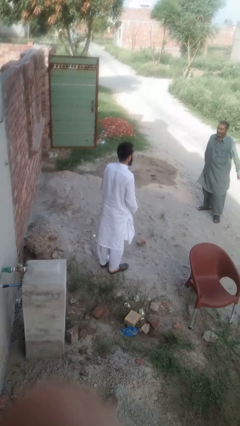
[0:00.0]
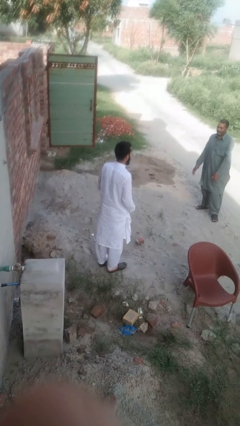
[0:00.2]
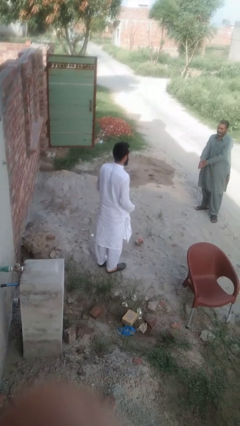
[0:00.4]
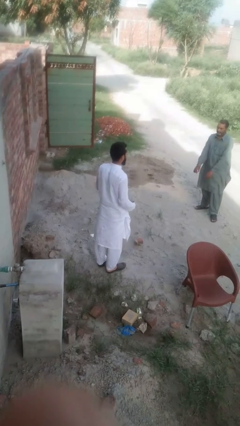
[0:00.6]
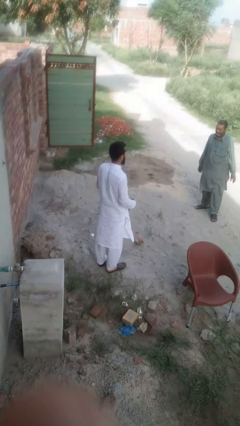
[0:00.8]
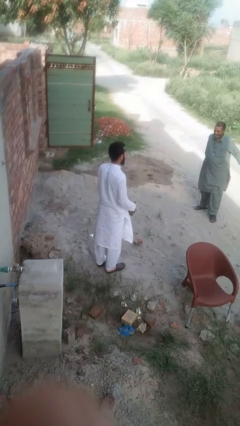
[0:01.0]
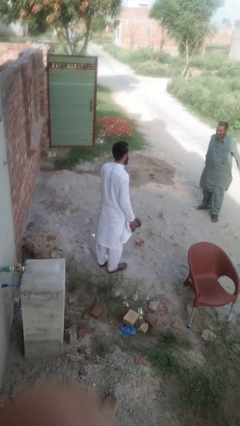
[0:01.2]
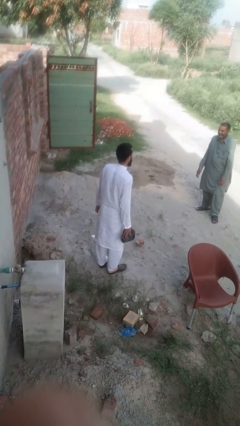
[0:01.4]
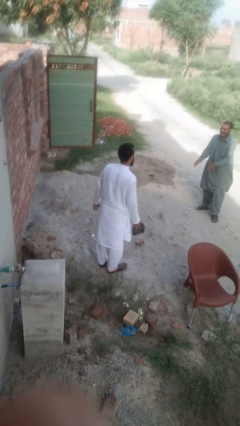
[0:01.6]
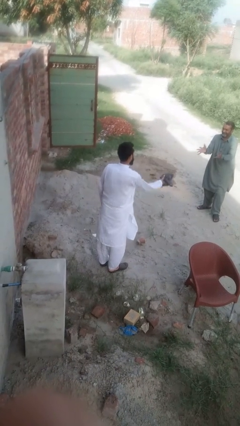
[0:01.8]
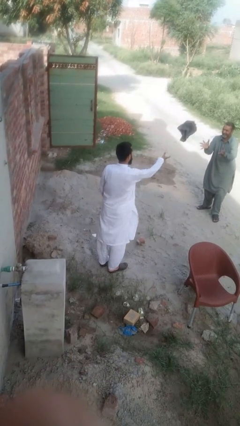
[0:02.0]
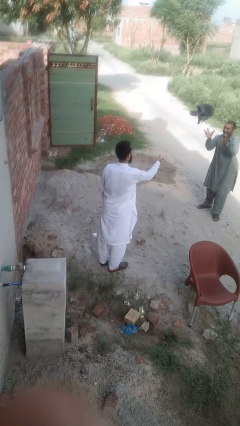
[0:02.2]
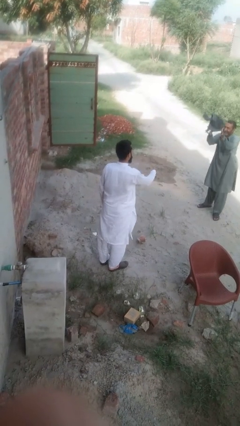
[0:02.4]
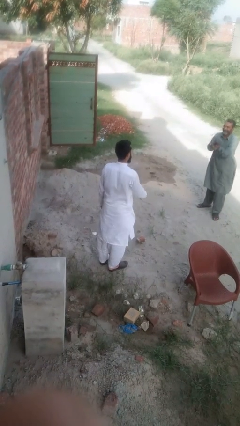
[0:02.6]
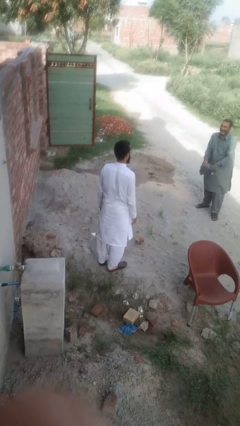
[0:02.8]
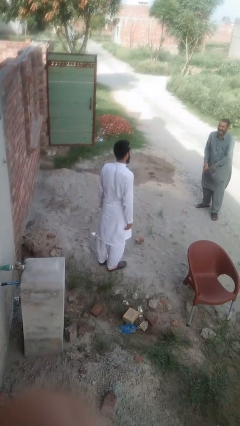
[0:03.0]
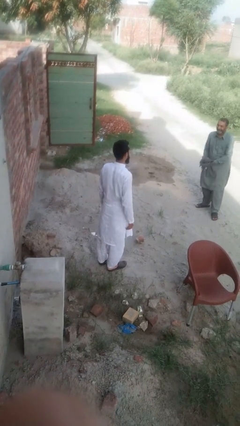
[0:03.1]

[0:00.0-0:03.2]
person throws object to person

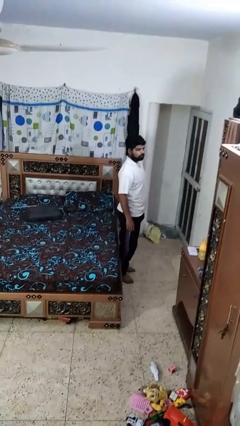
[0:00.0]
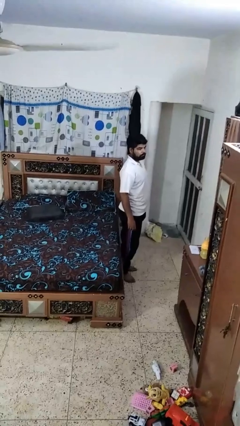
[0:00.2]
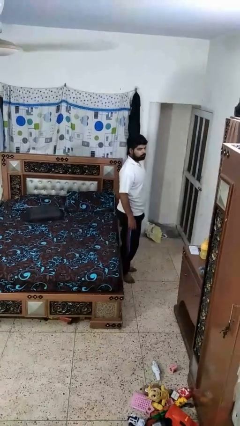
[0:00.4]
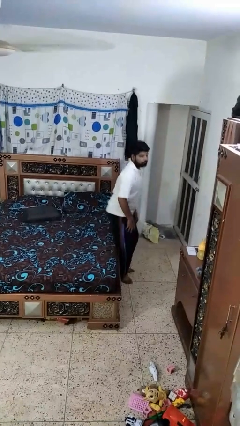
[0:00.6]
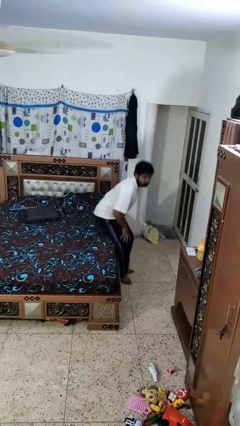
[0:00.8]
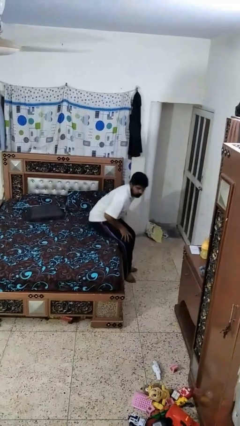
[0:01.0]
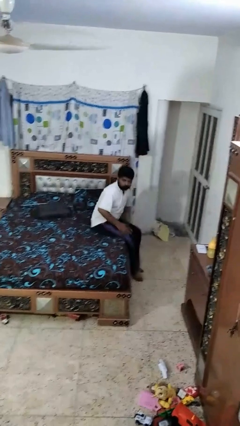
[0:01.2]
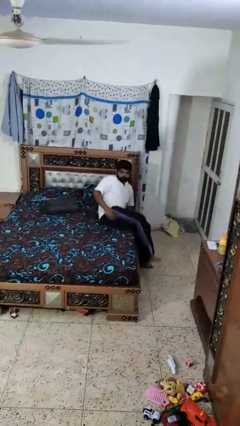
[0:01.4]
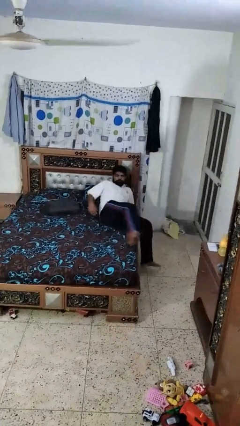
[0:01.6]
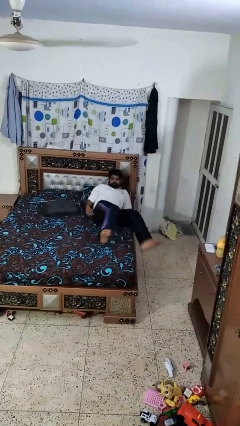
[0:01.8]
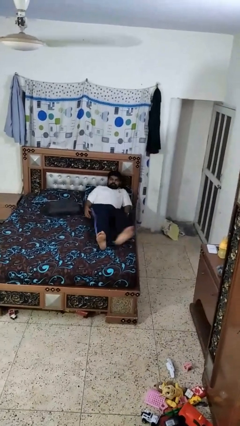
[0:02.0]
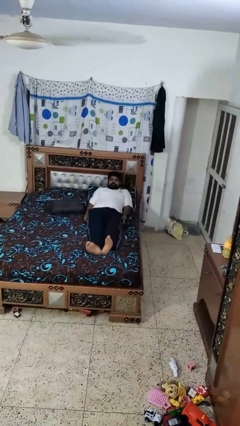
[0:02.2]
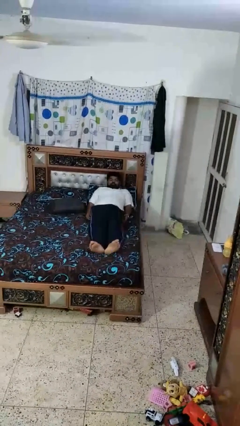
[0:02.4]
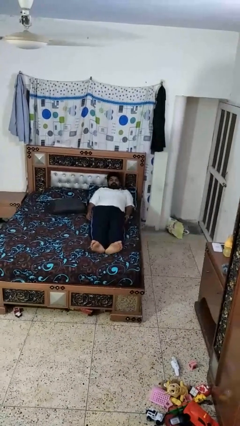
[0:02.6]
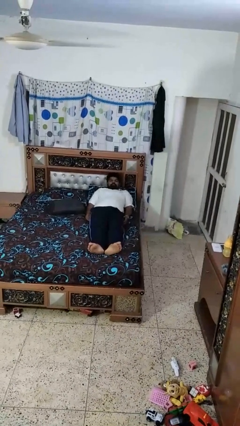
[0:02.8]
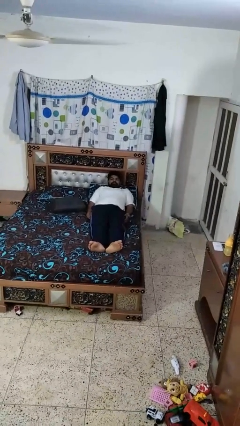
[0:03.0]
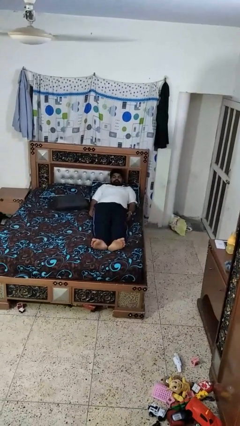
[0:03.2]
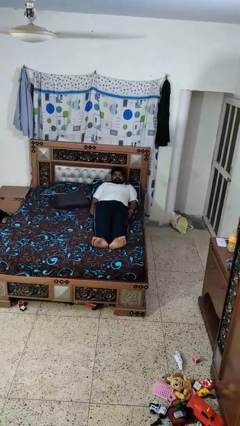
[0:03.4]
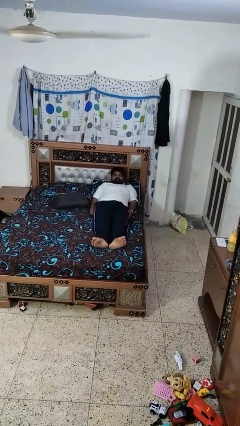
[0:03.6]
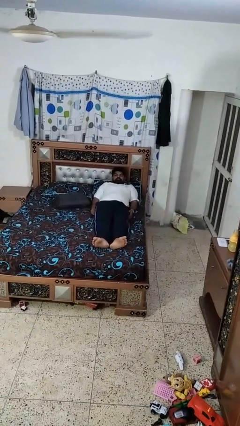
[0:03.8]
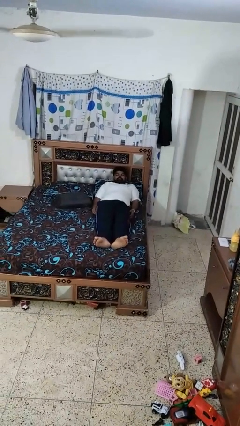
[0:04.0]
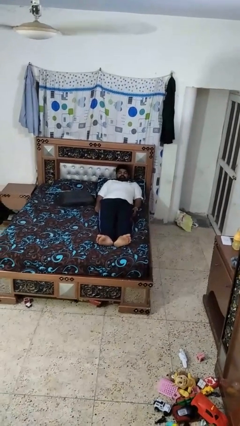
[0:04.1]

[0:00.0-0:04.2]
person lies down on bed

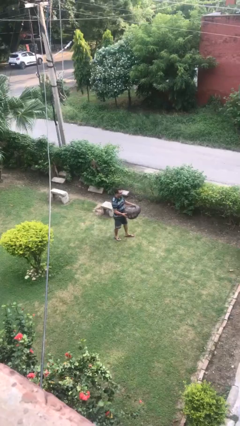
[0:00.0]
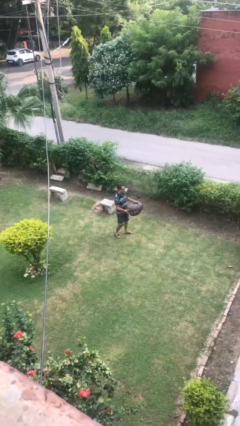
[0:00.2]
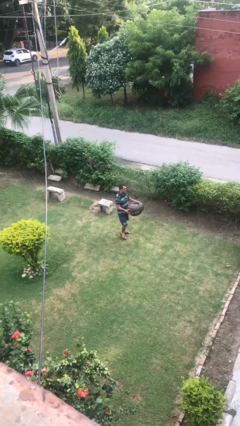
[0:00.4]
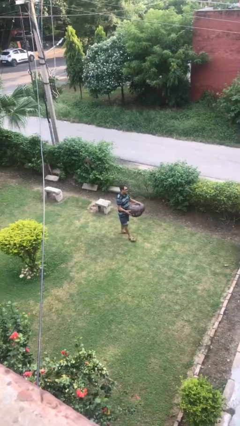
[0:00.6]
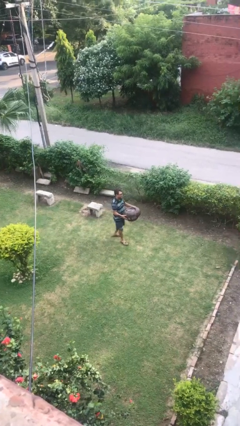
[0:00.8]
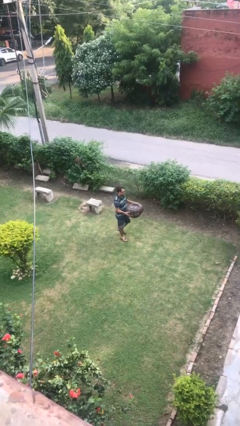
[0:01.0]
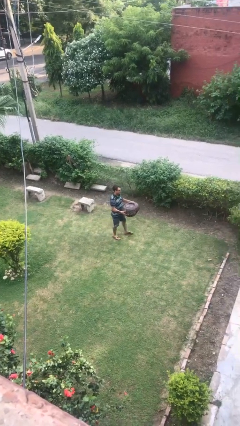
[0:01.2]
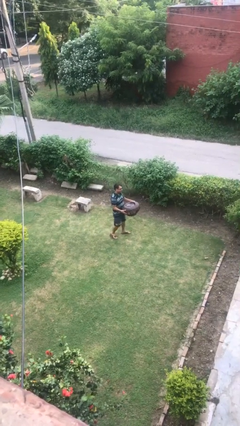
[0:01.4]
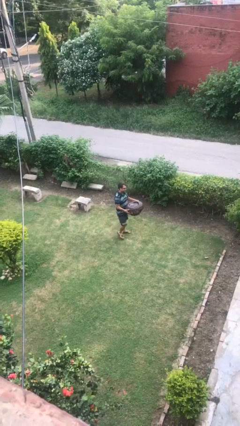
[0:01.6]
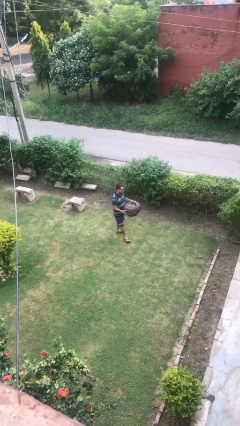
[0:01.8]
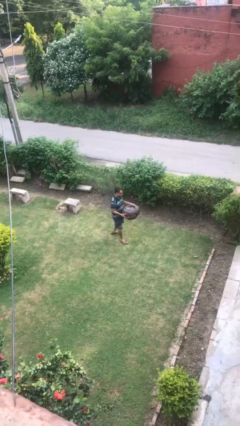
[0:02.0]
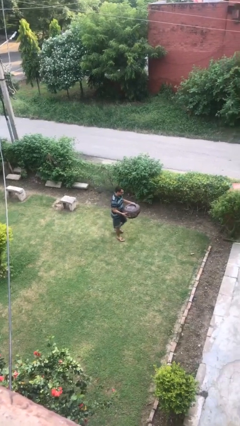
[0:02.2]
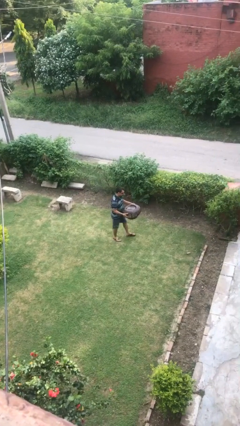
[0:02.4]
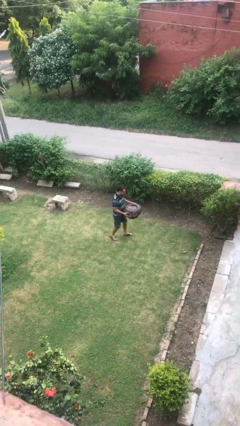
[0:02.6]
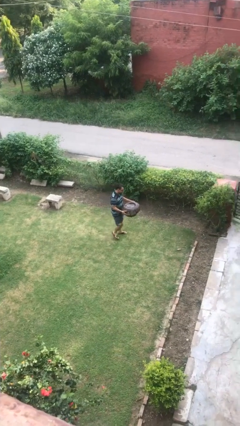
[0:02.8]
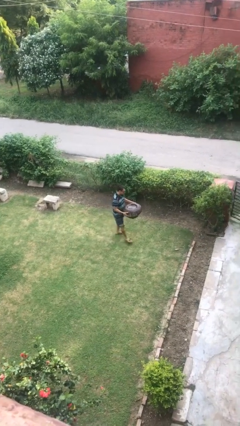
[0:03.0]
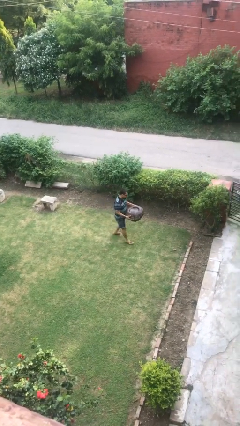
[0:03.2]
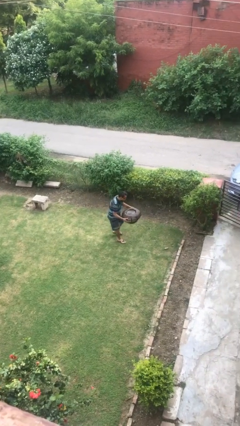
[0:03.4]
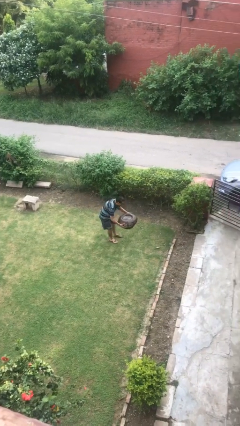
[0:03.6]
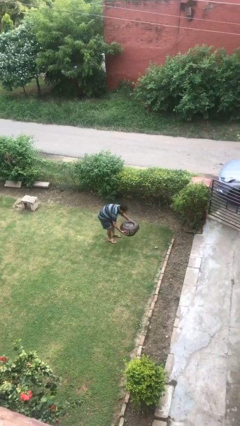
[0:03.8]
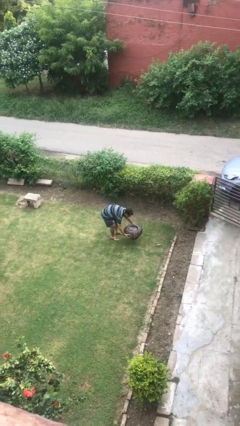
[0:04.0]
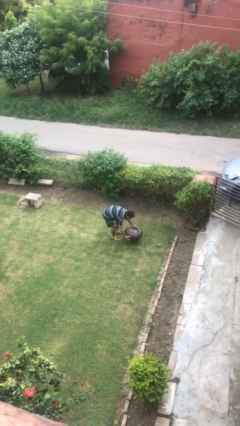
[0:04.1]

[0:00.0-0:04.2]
person carries heavy object

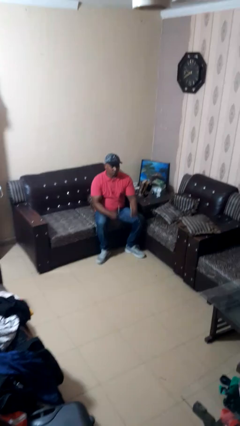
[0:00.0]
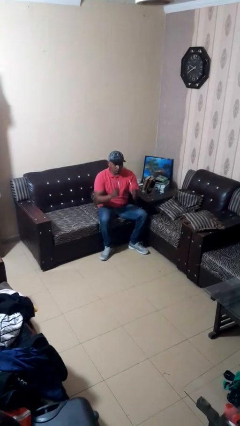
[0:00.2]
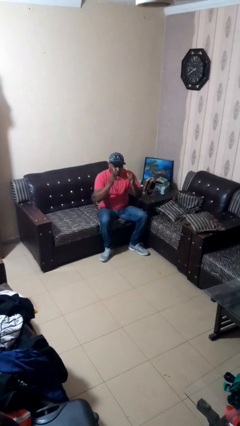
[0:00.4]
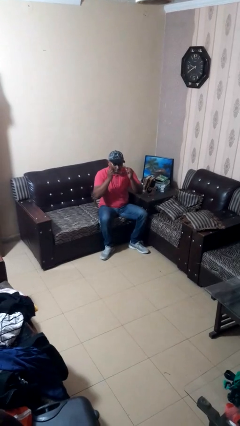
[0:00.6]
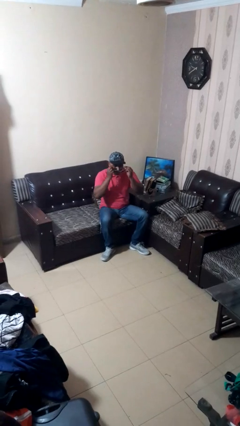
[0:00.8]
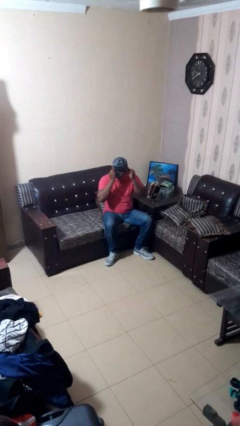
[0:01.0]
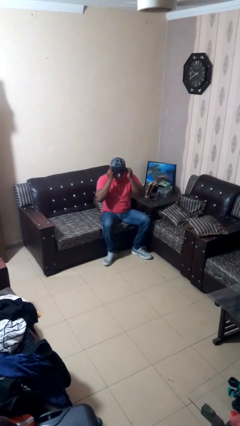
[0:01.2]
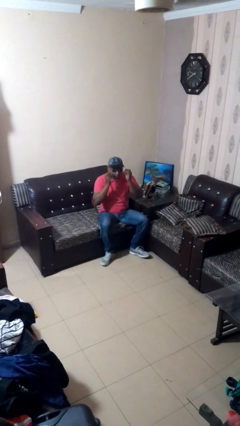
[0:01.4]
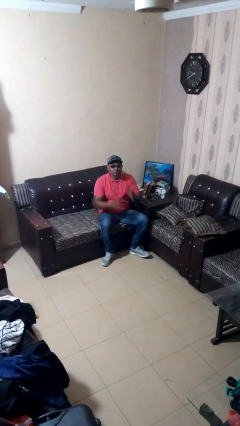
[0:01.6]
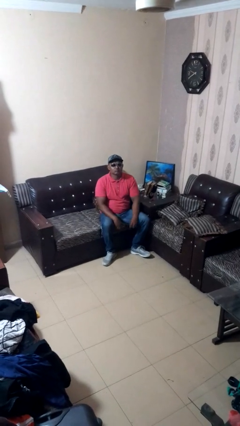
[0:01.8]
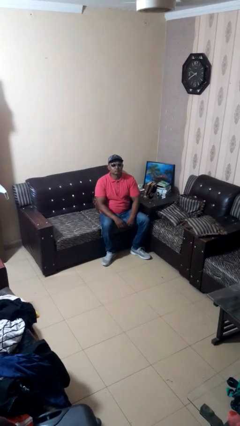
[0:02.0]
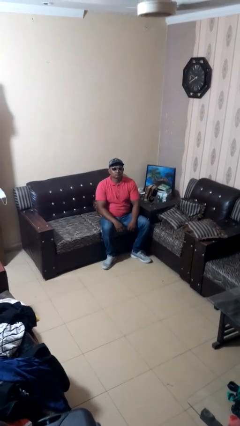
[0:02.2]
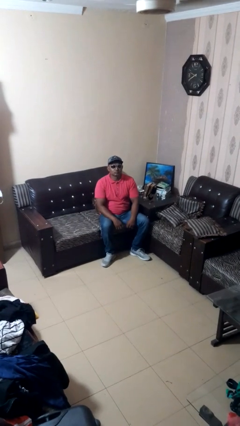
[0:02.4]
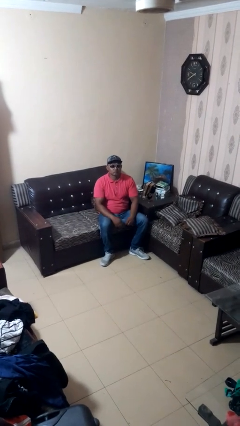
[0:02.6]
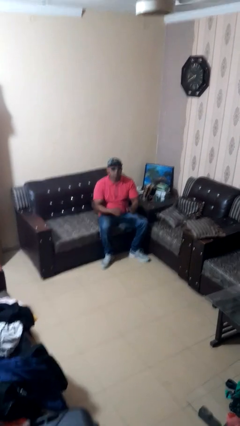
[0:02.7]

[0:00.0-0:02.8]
person puts on sunglasses

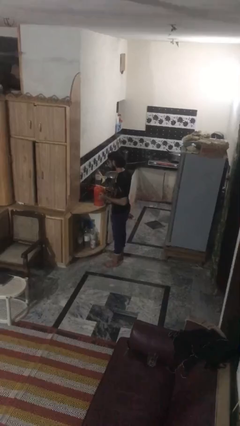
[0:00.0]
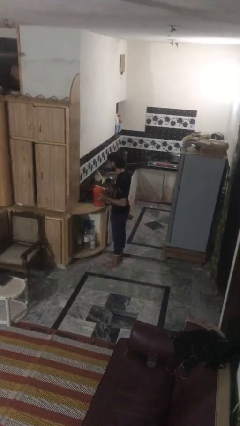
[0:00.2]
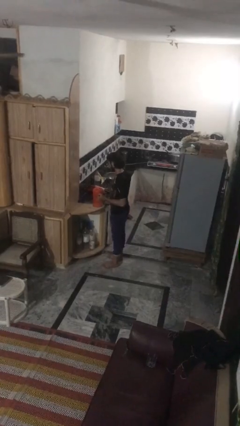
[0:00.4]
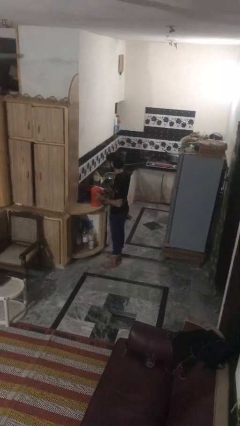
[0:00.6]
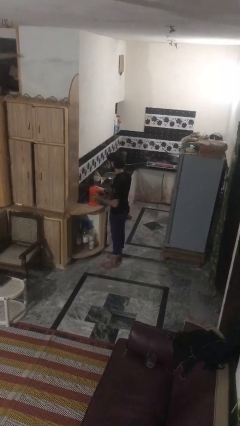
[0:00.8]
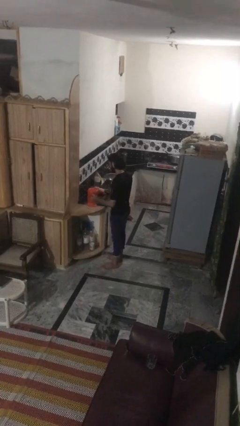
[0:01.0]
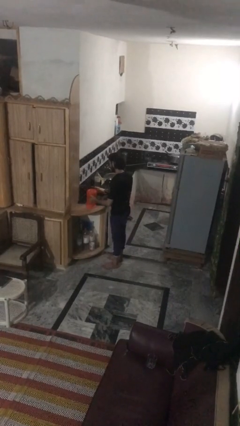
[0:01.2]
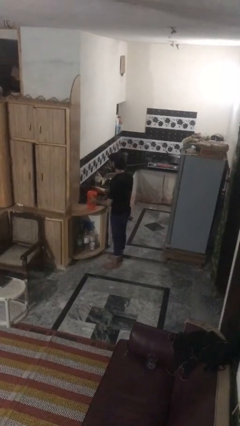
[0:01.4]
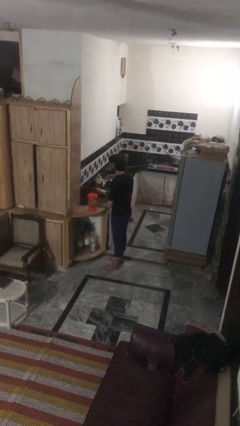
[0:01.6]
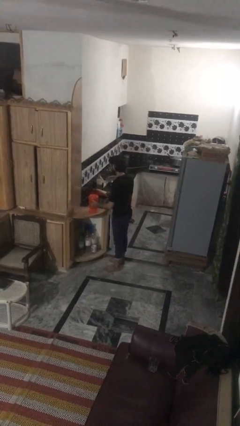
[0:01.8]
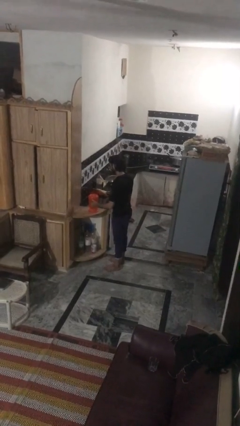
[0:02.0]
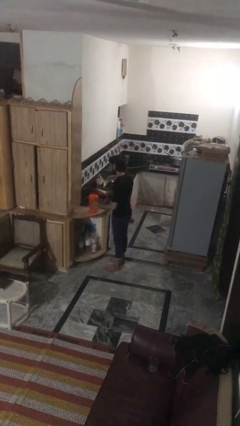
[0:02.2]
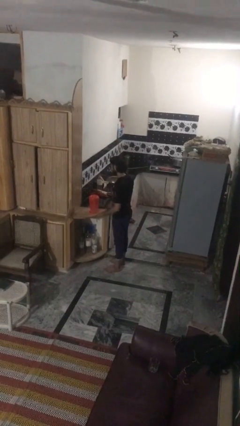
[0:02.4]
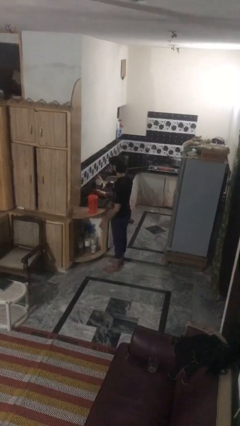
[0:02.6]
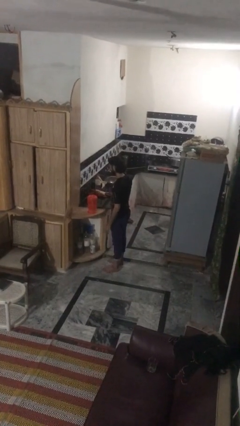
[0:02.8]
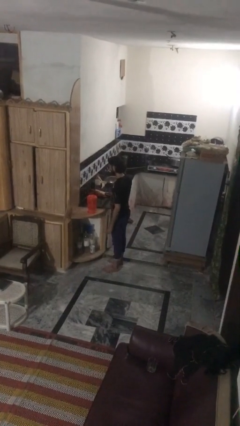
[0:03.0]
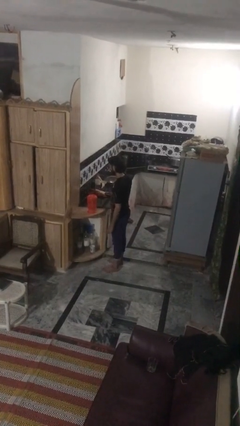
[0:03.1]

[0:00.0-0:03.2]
person puts down object on countertop
